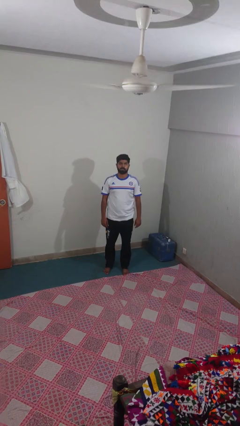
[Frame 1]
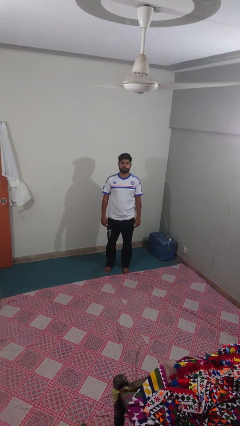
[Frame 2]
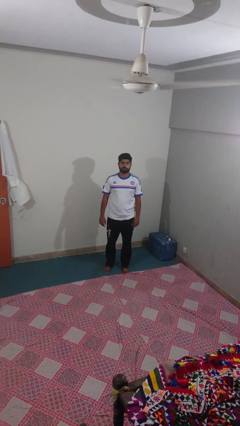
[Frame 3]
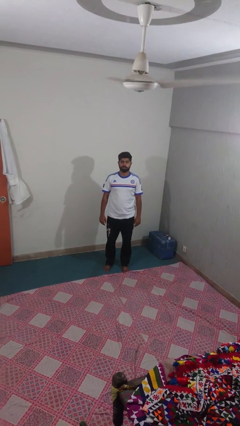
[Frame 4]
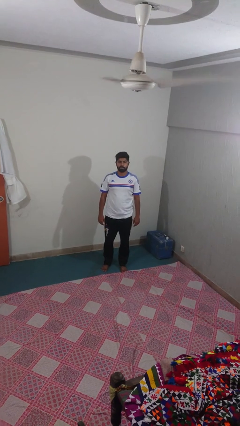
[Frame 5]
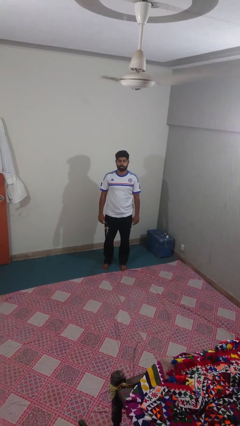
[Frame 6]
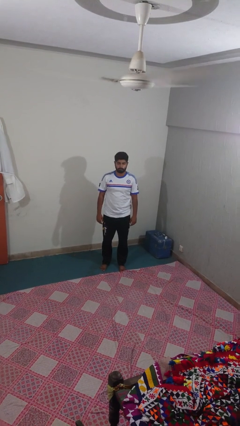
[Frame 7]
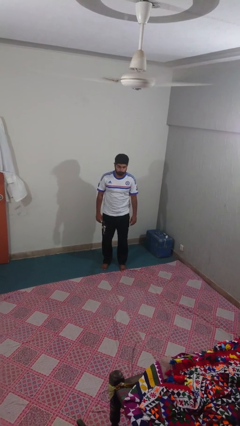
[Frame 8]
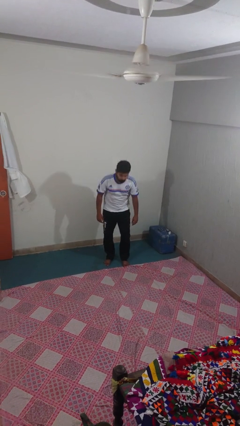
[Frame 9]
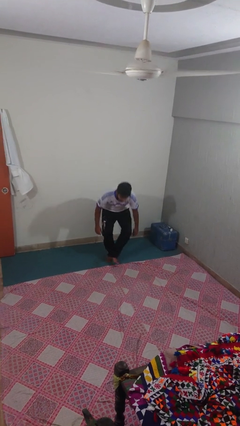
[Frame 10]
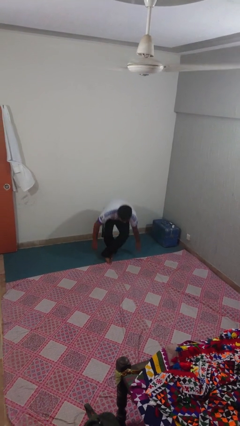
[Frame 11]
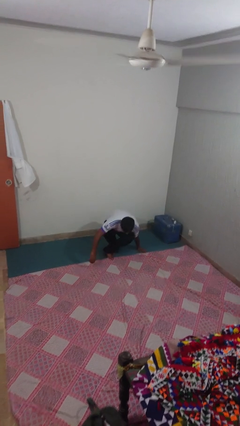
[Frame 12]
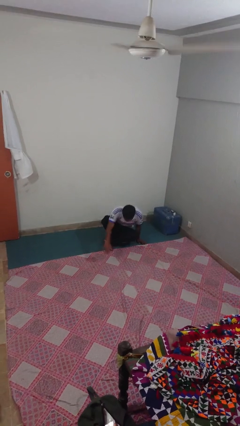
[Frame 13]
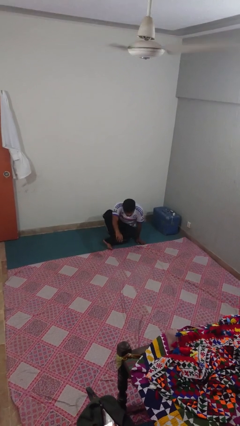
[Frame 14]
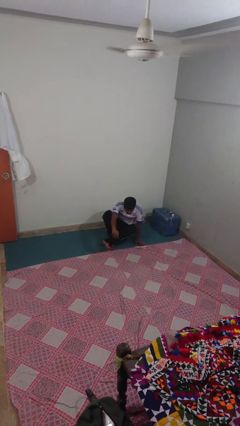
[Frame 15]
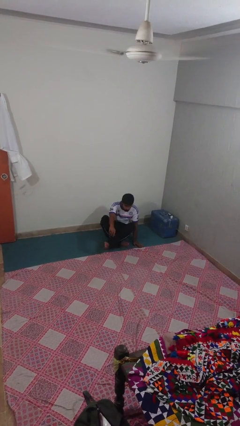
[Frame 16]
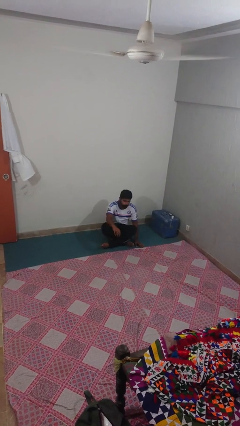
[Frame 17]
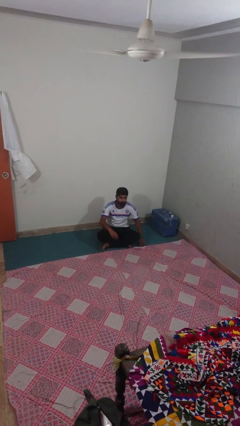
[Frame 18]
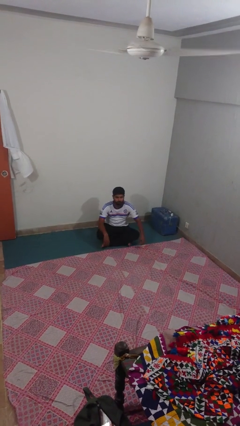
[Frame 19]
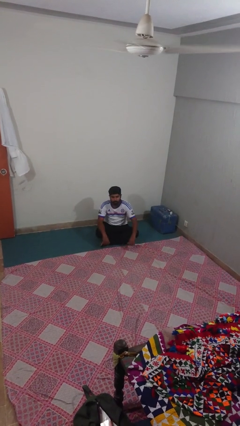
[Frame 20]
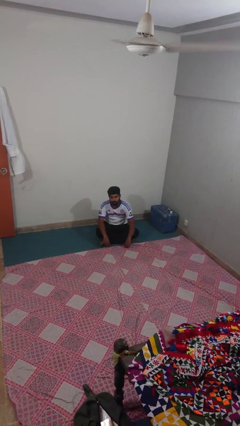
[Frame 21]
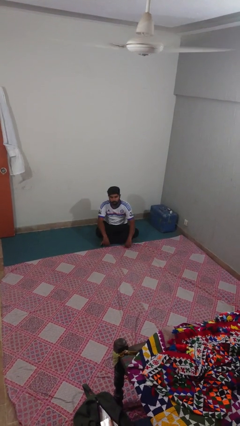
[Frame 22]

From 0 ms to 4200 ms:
person sits crisscross

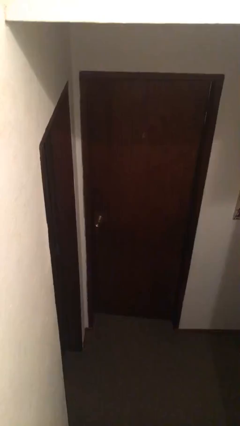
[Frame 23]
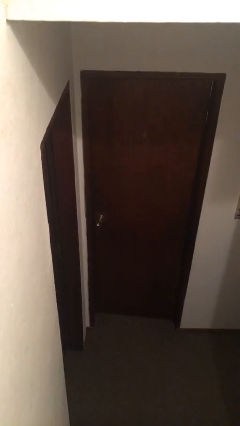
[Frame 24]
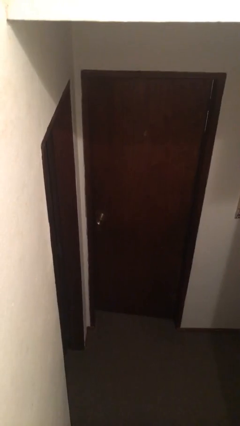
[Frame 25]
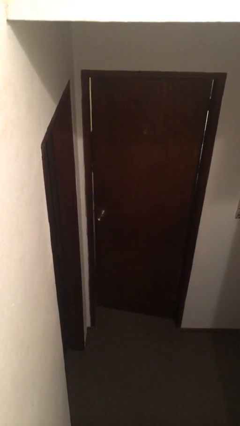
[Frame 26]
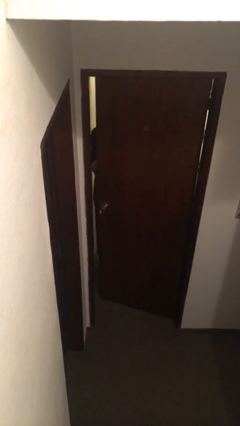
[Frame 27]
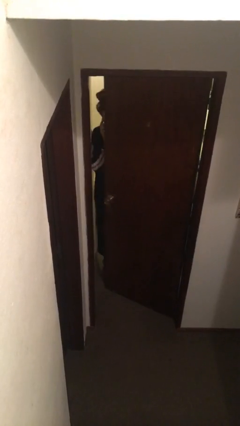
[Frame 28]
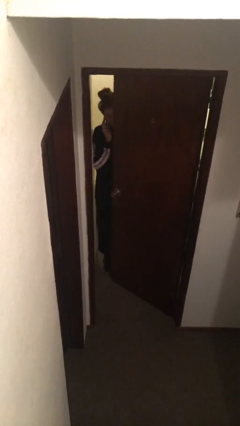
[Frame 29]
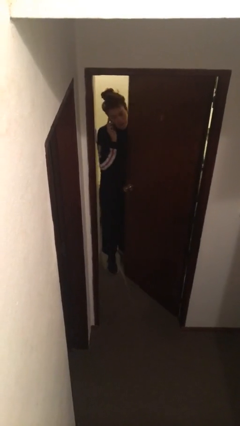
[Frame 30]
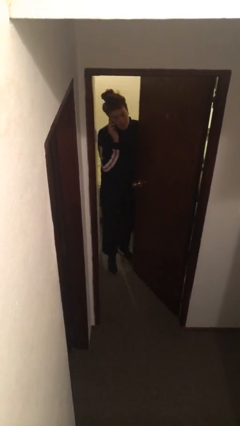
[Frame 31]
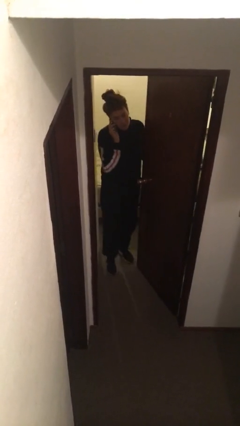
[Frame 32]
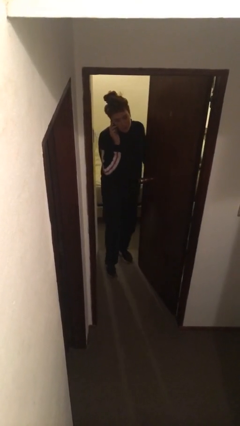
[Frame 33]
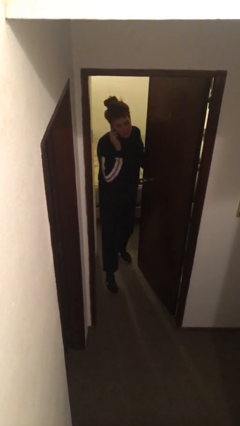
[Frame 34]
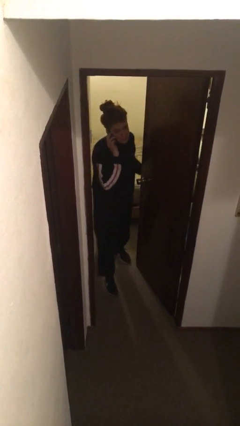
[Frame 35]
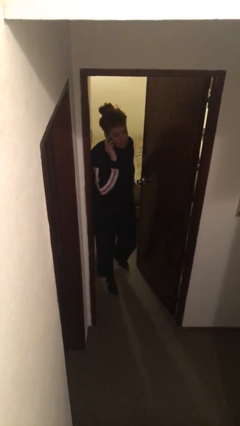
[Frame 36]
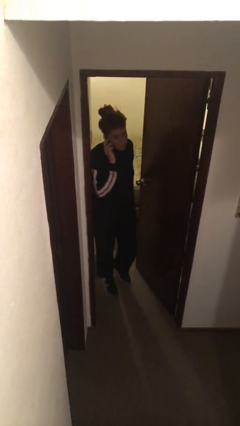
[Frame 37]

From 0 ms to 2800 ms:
person opens facility door

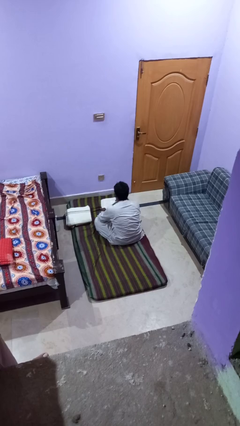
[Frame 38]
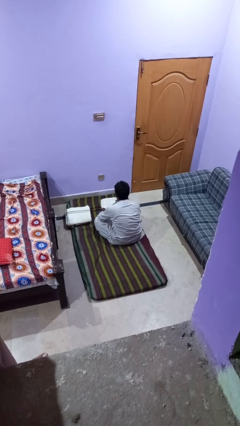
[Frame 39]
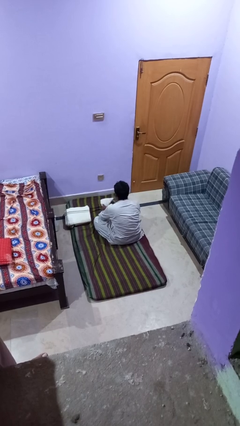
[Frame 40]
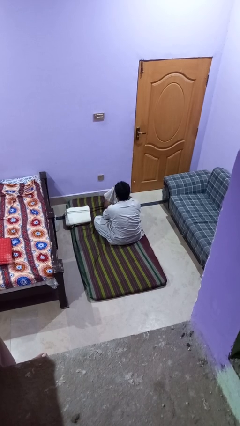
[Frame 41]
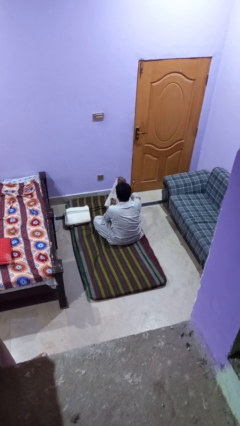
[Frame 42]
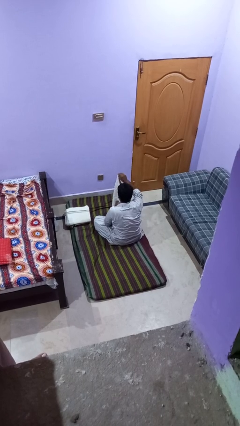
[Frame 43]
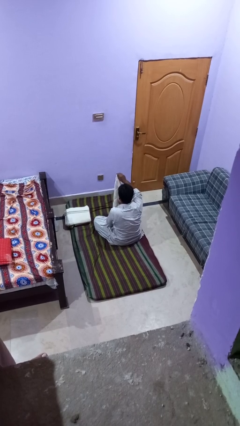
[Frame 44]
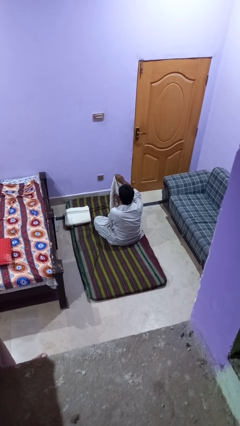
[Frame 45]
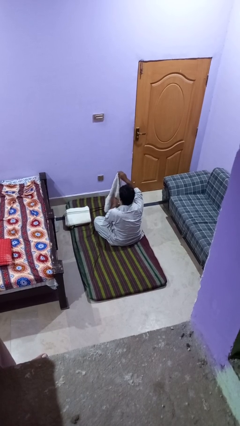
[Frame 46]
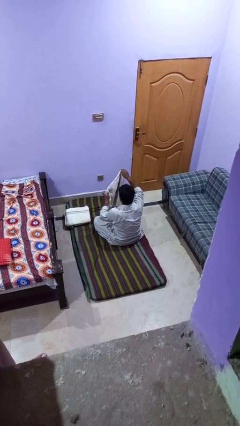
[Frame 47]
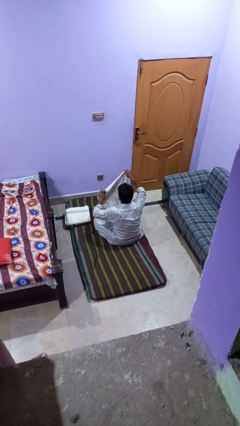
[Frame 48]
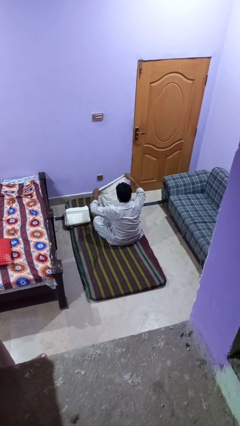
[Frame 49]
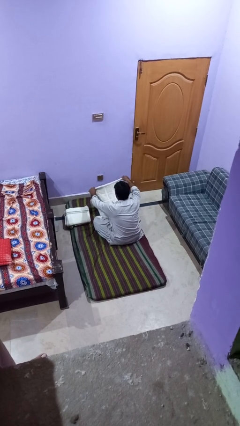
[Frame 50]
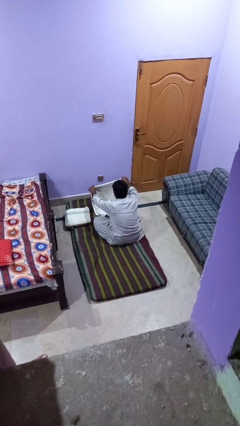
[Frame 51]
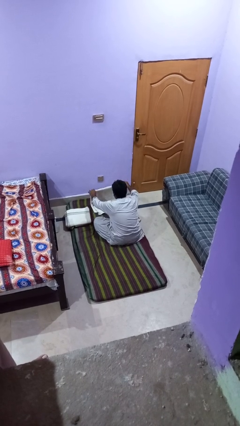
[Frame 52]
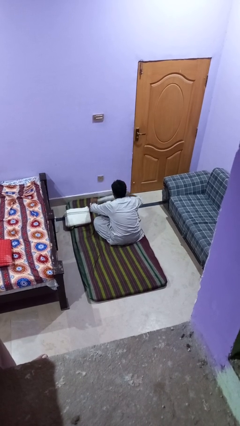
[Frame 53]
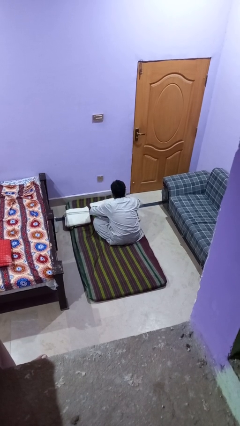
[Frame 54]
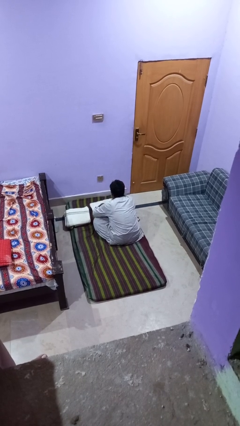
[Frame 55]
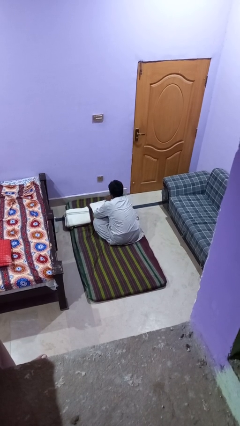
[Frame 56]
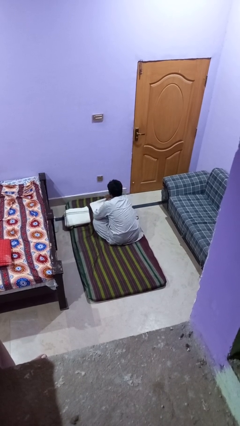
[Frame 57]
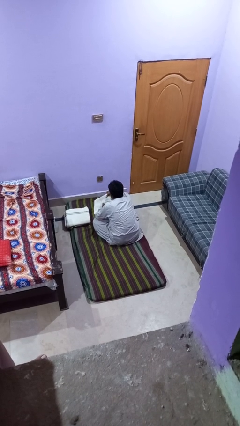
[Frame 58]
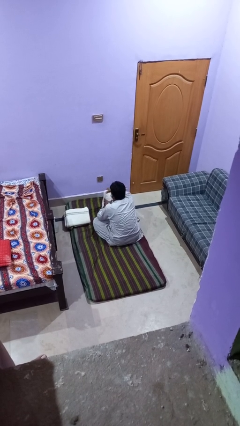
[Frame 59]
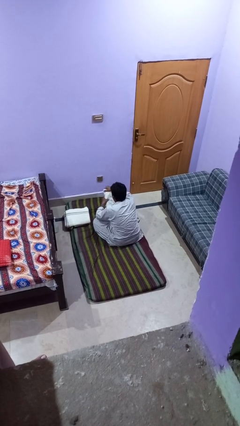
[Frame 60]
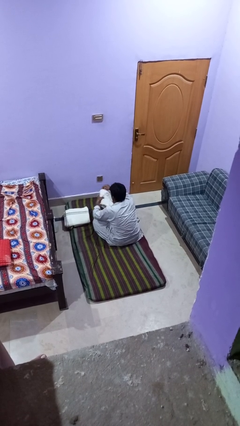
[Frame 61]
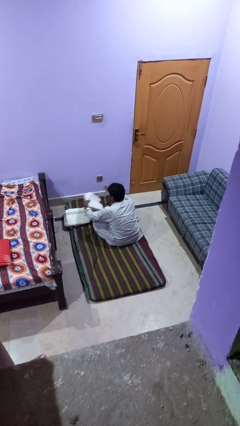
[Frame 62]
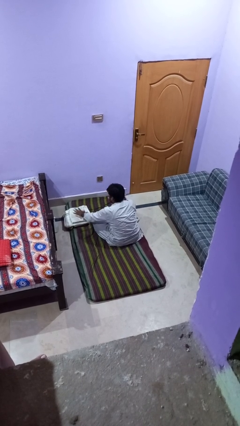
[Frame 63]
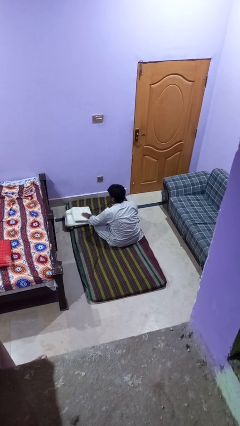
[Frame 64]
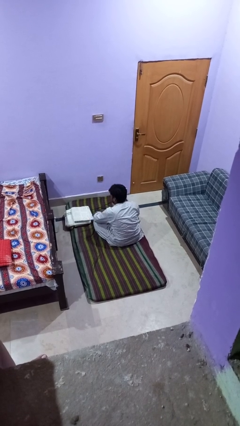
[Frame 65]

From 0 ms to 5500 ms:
person folds towel

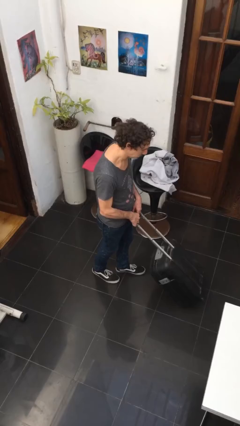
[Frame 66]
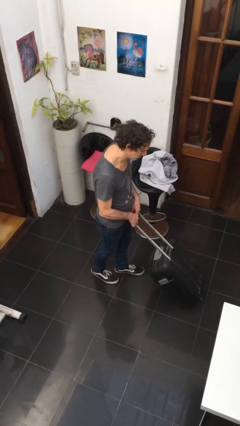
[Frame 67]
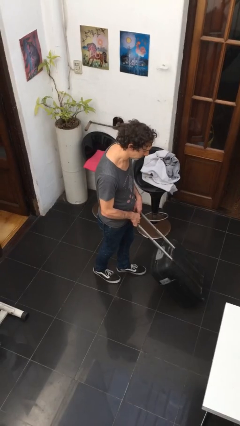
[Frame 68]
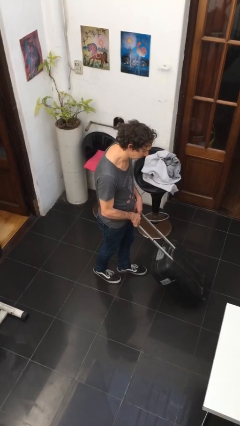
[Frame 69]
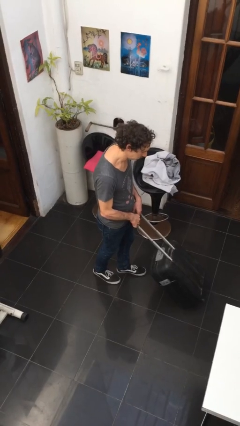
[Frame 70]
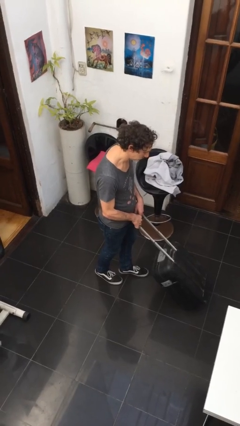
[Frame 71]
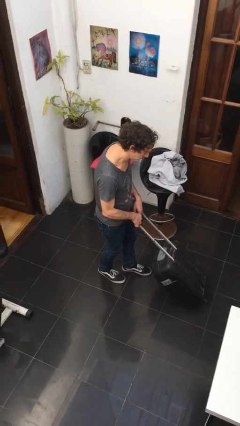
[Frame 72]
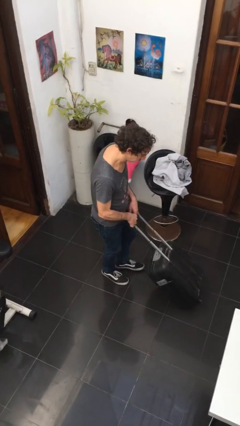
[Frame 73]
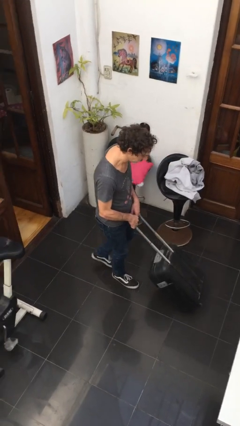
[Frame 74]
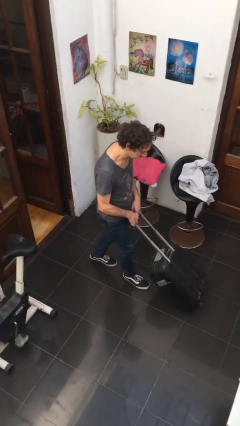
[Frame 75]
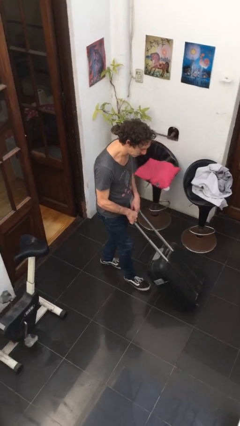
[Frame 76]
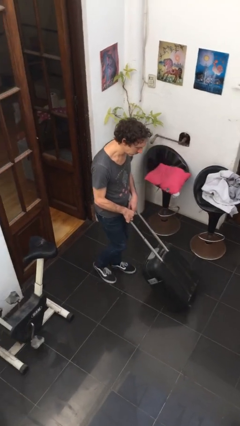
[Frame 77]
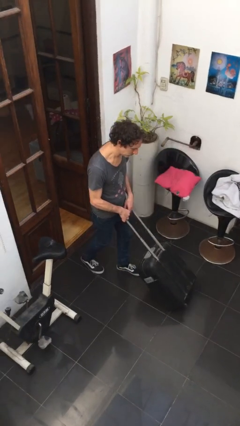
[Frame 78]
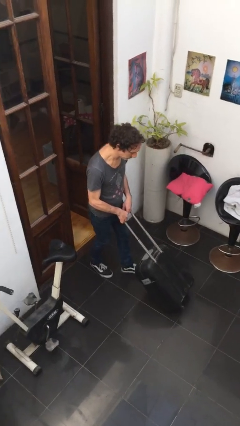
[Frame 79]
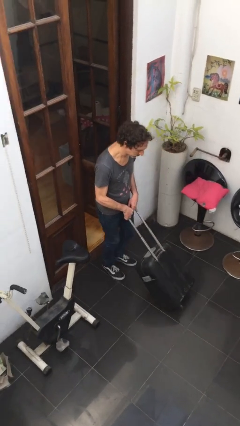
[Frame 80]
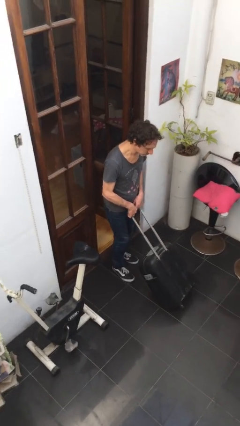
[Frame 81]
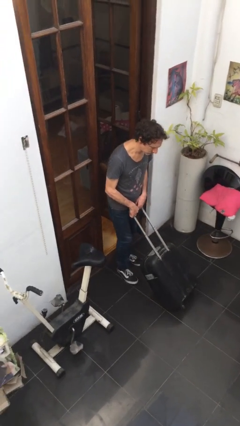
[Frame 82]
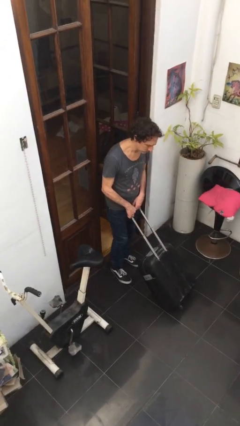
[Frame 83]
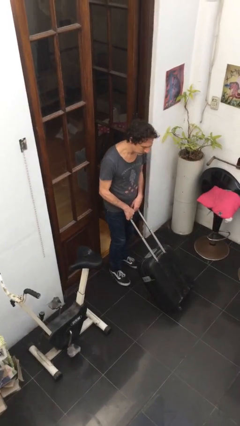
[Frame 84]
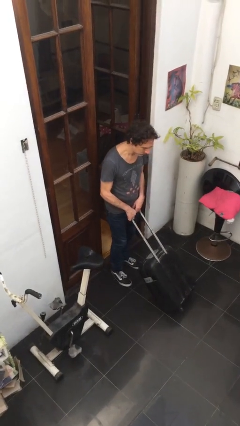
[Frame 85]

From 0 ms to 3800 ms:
person pulls wheeled cart

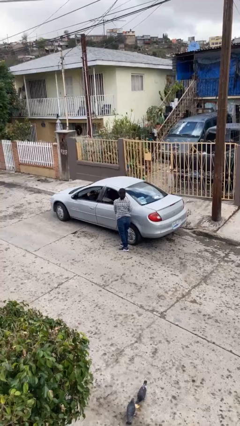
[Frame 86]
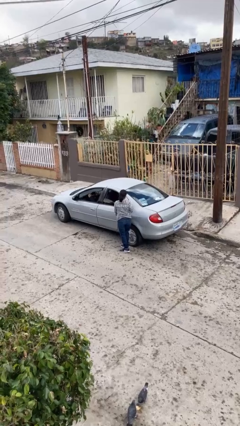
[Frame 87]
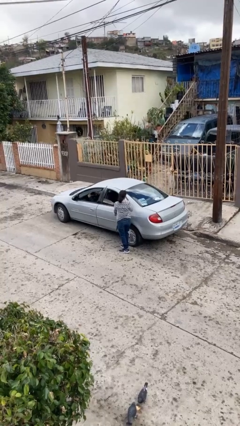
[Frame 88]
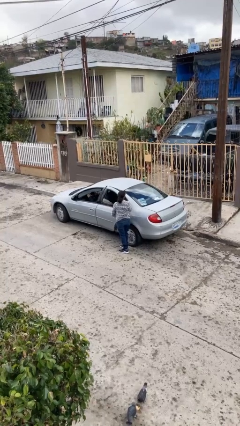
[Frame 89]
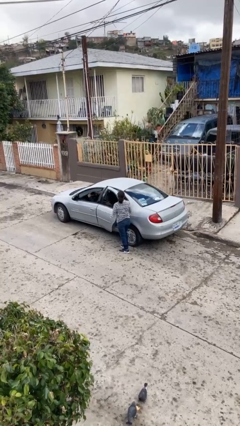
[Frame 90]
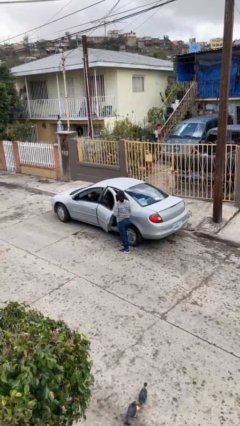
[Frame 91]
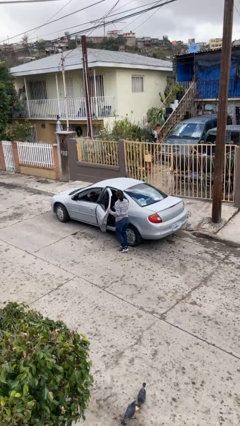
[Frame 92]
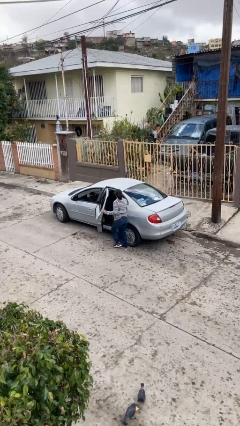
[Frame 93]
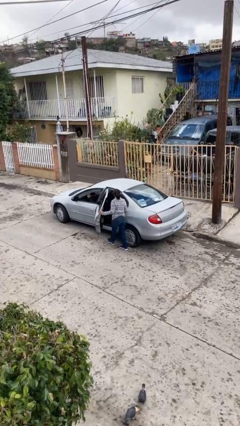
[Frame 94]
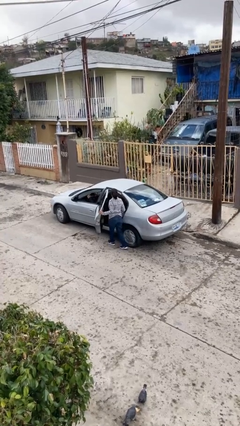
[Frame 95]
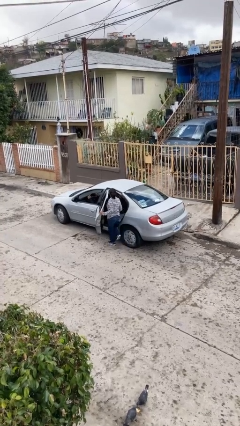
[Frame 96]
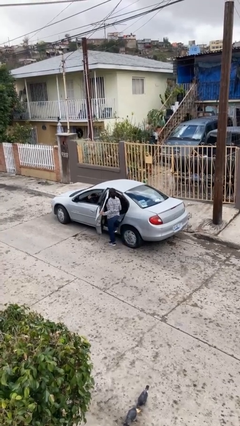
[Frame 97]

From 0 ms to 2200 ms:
car picks up person
